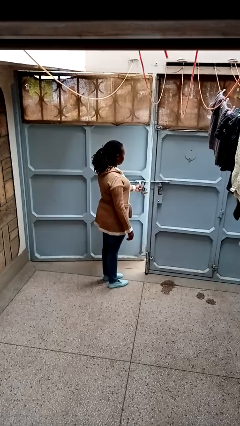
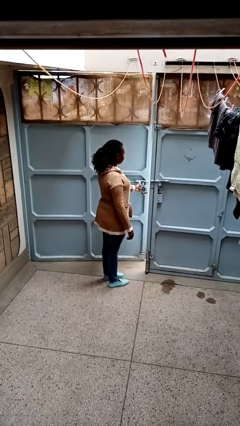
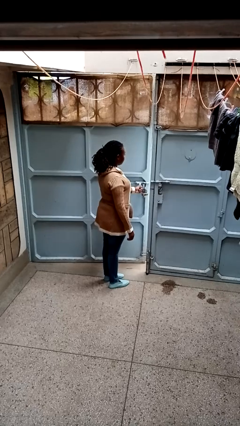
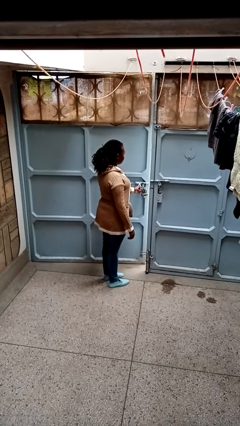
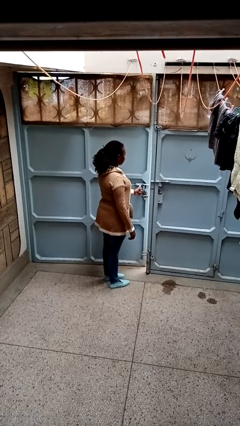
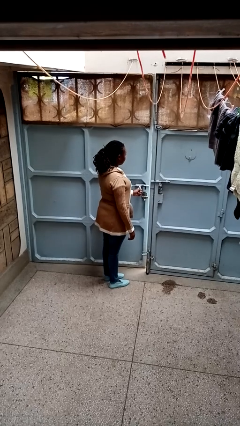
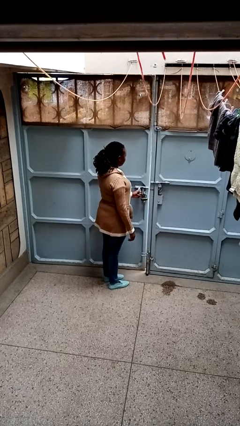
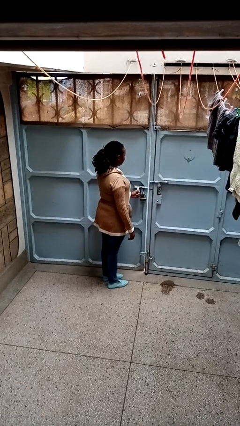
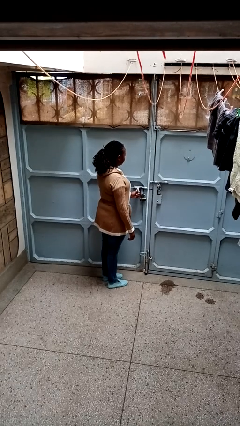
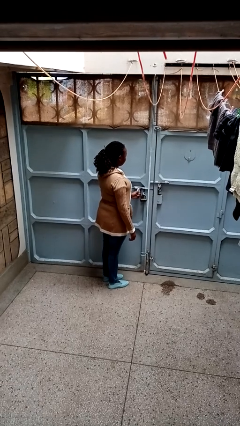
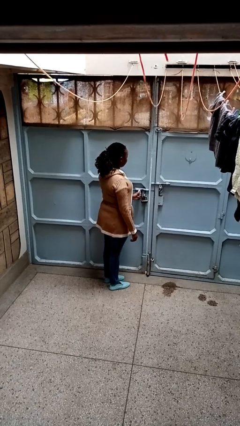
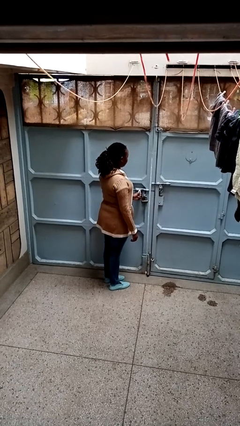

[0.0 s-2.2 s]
person closes gate

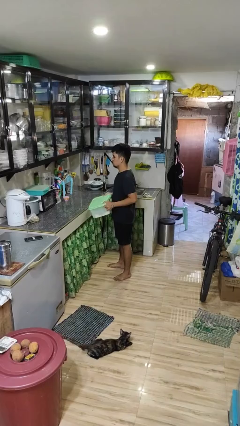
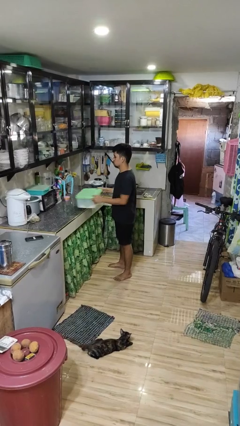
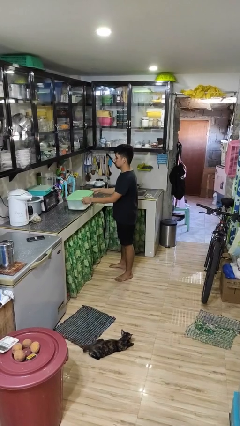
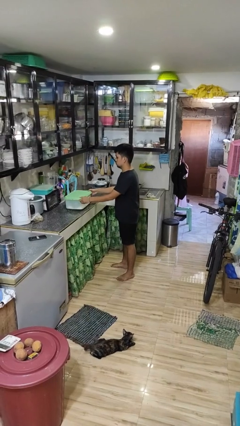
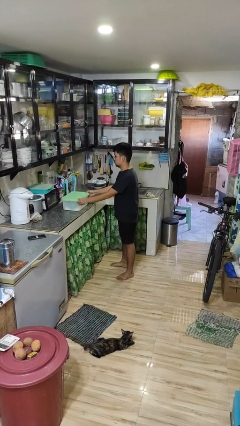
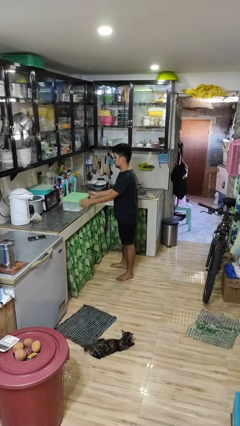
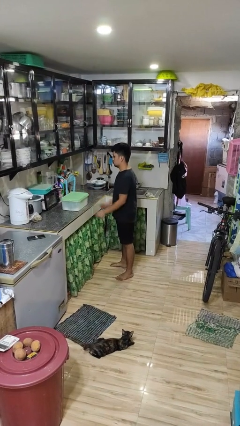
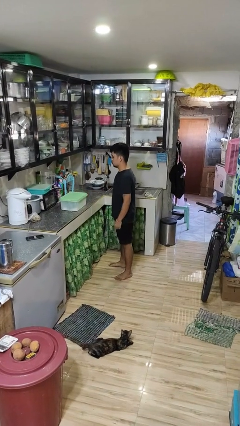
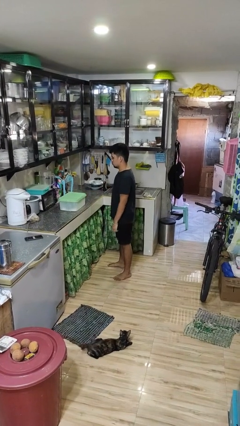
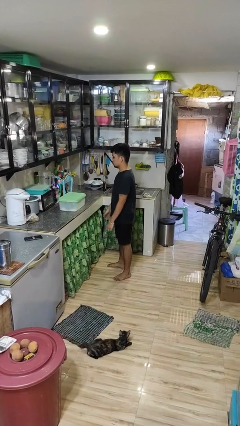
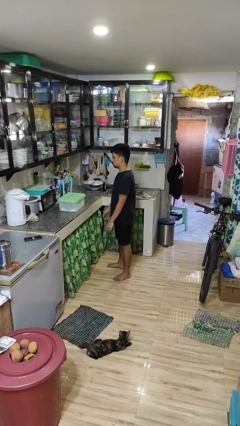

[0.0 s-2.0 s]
person puts down object on countertop

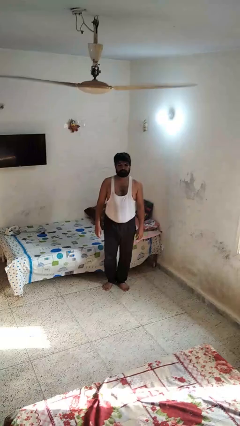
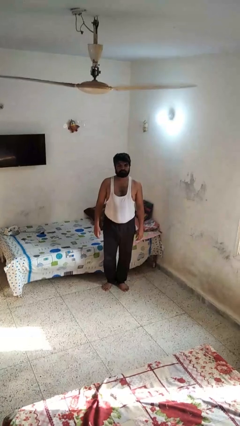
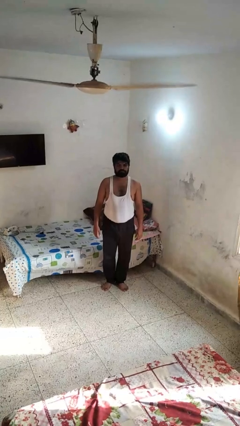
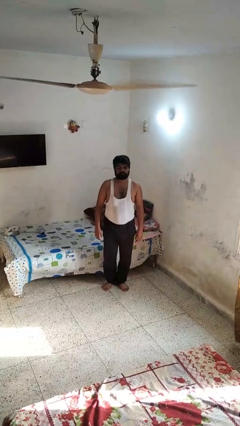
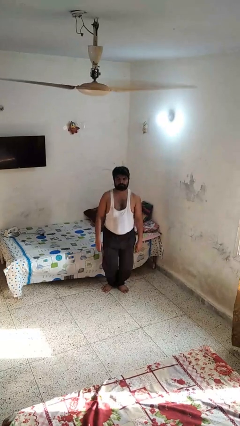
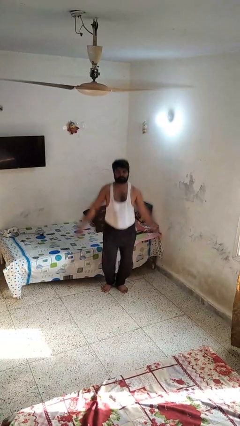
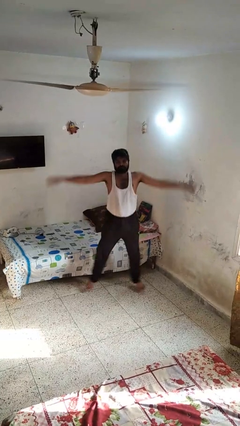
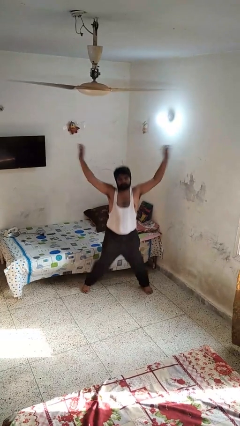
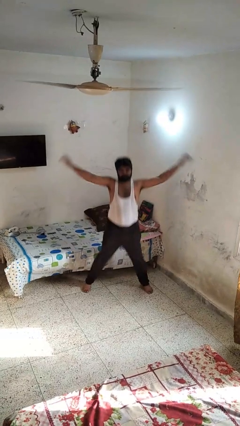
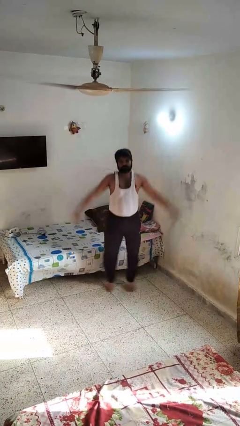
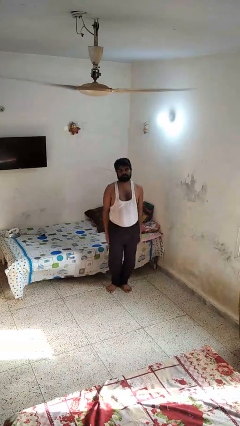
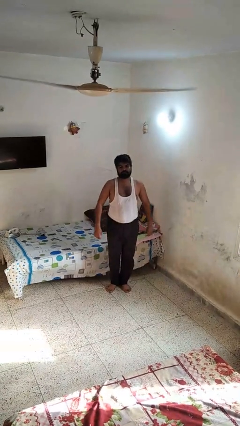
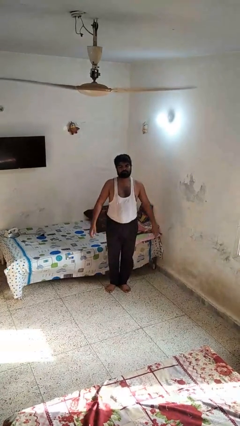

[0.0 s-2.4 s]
person exercises with jumping jacks

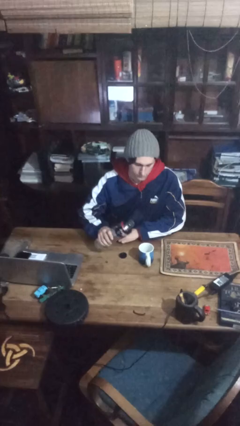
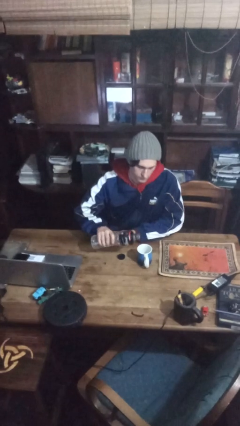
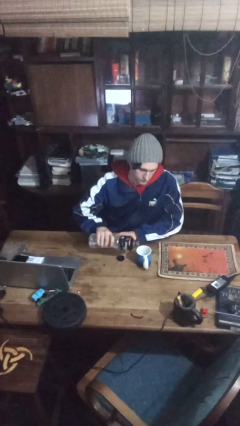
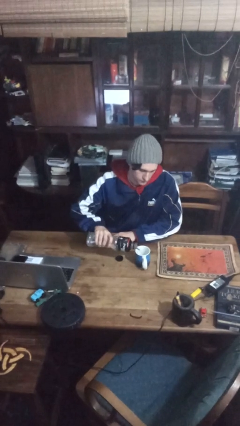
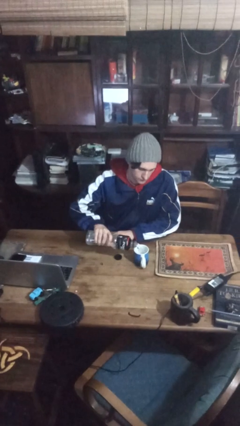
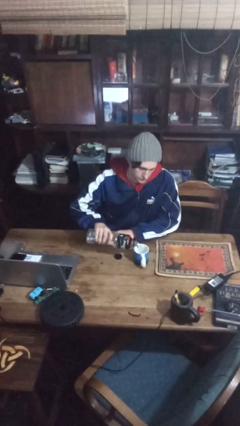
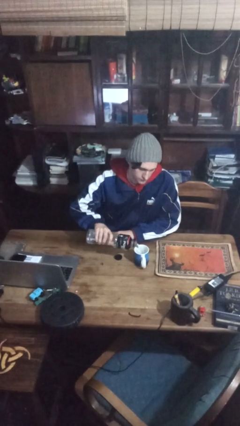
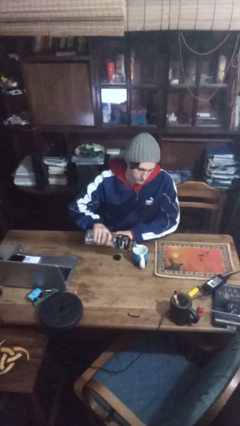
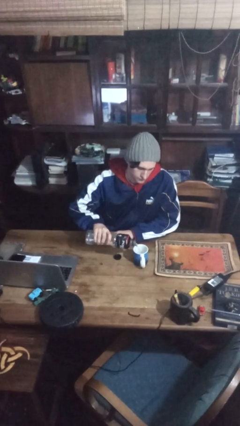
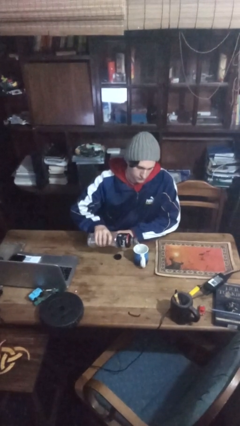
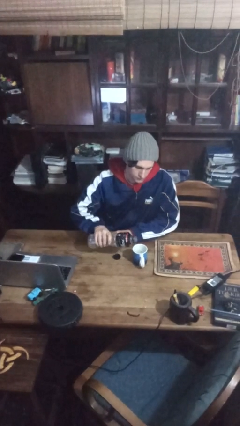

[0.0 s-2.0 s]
person pours liquid into cup

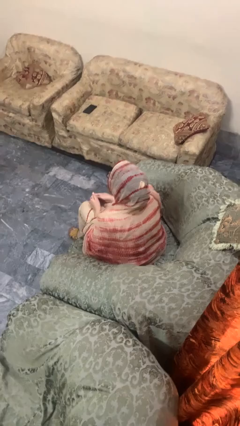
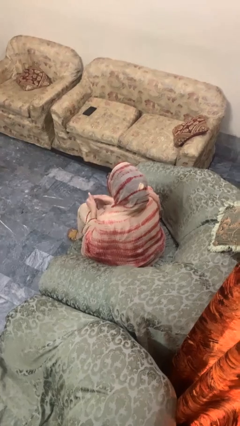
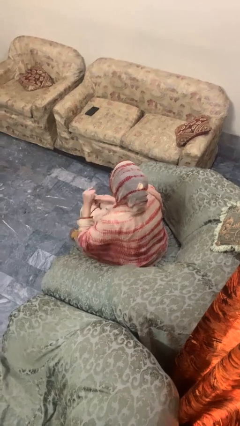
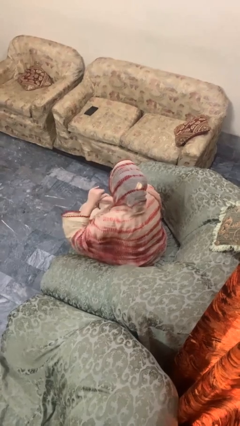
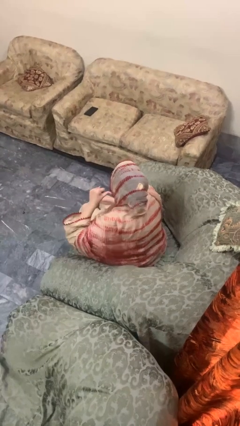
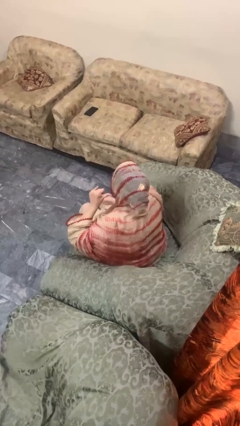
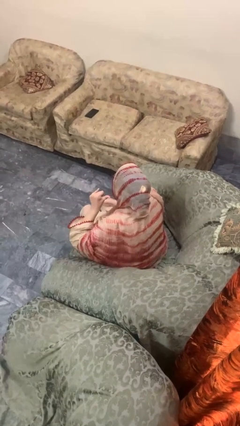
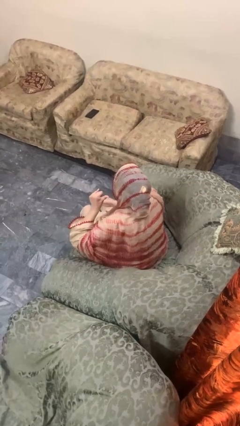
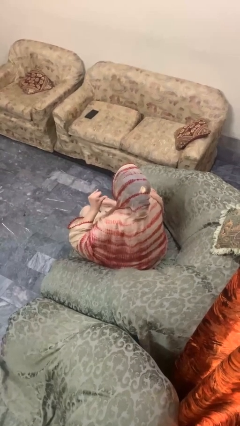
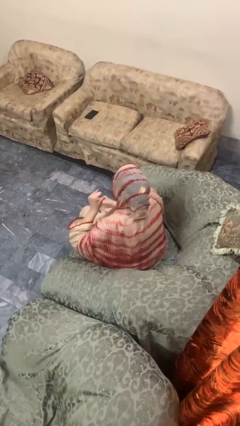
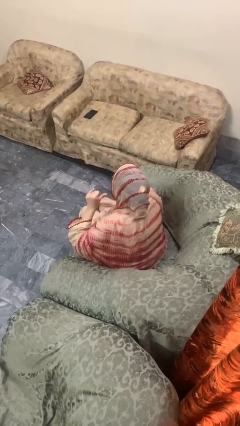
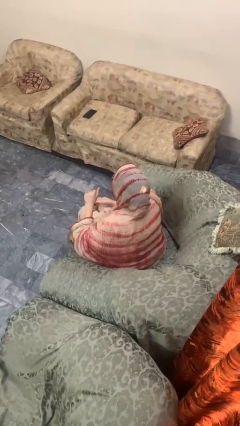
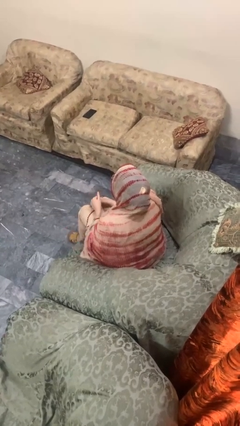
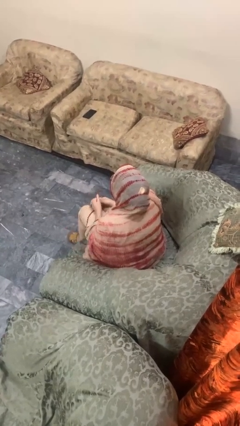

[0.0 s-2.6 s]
person gestures call me

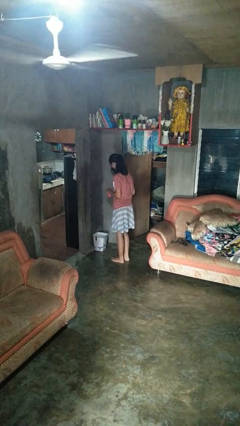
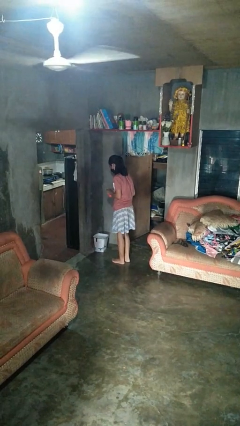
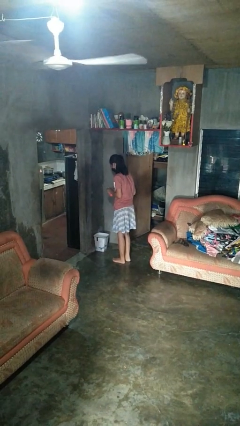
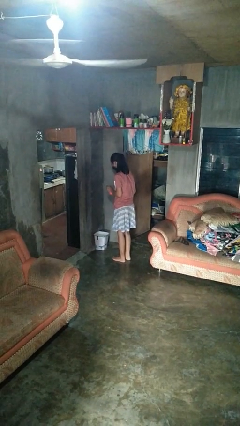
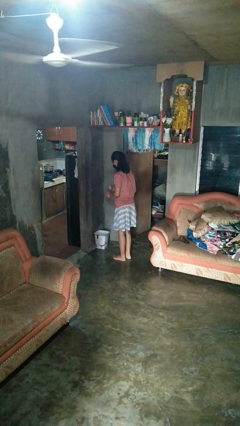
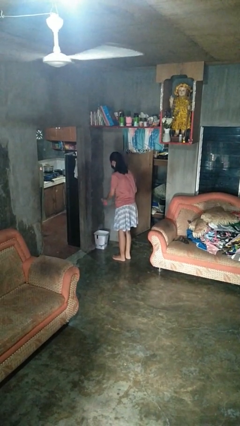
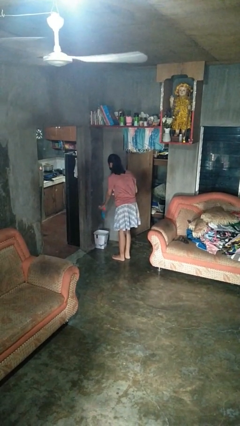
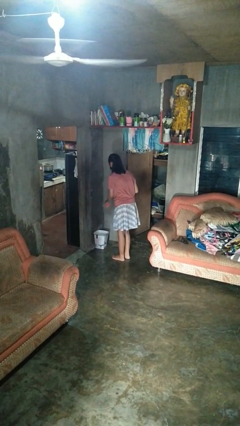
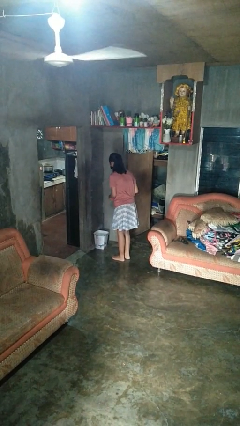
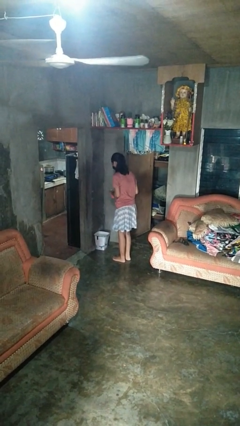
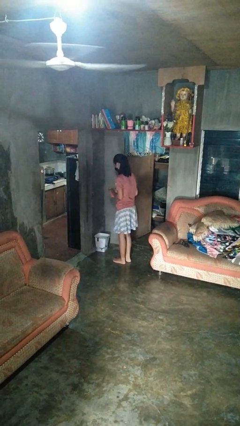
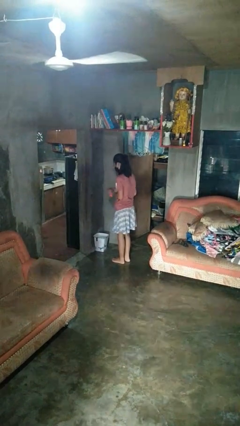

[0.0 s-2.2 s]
person discards trash

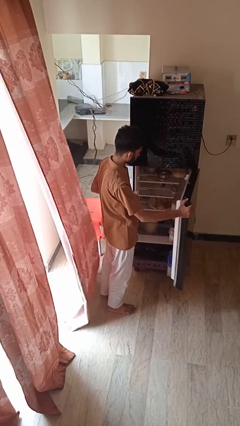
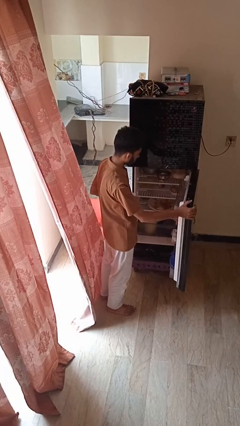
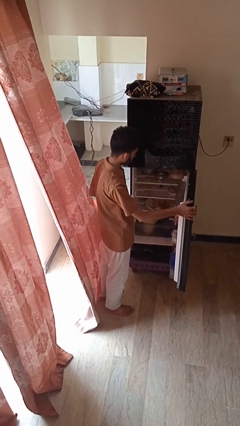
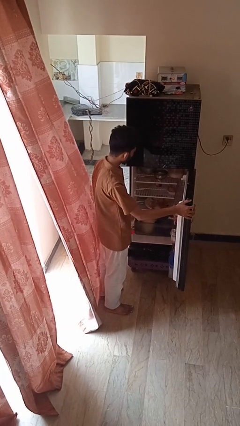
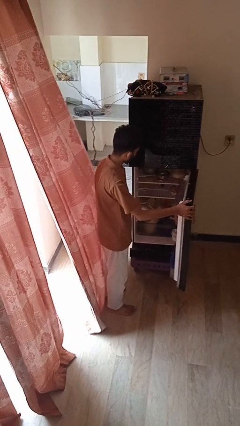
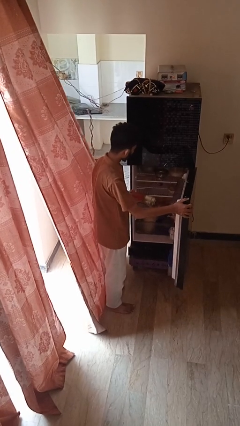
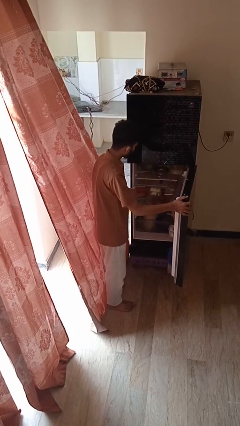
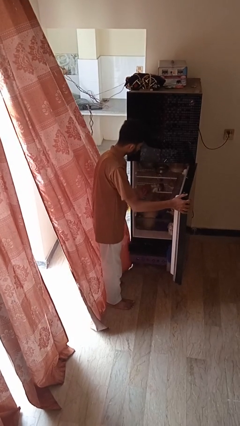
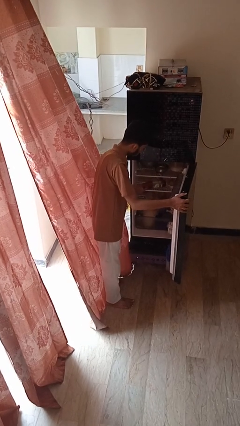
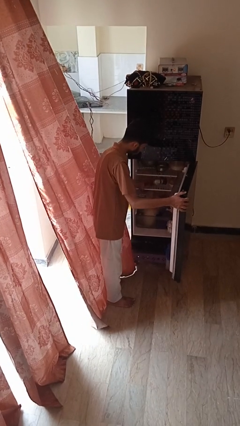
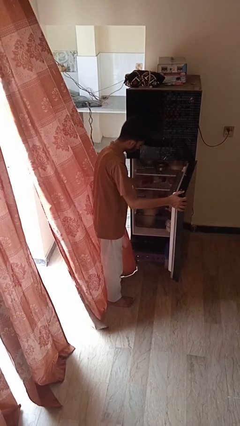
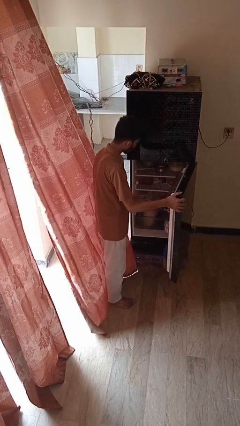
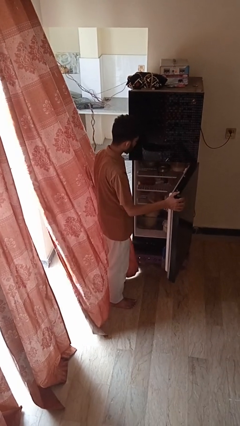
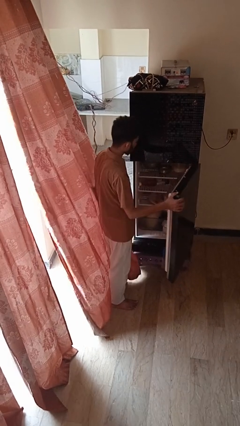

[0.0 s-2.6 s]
person puts object into refrigerator

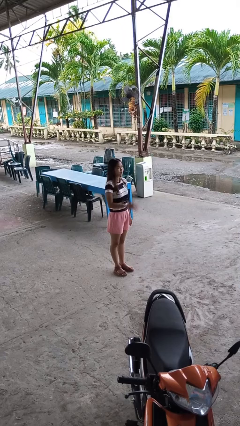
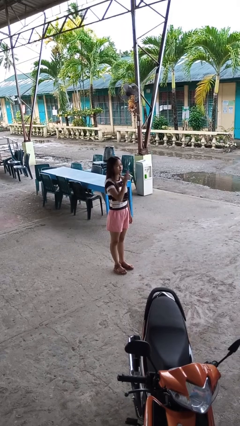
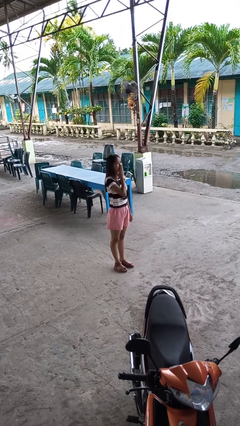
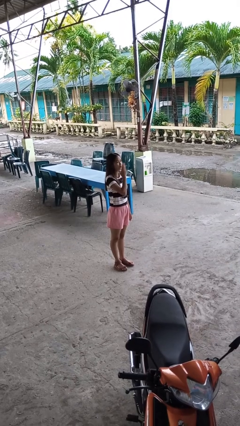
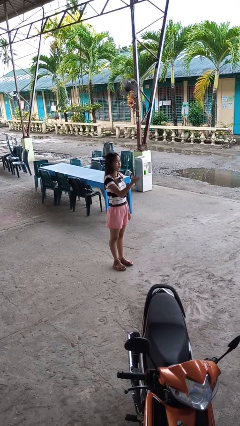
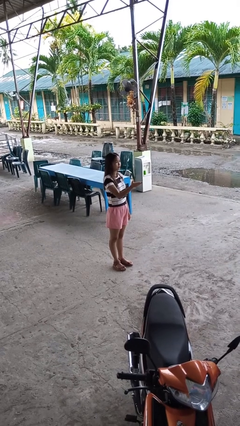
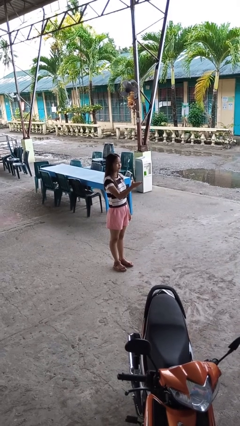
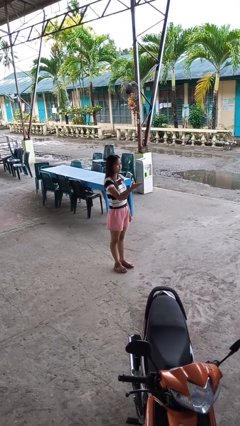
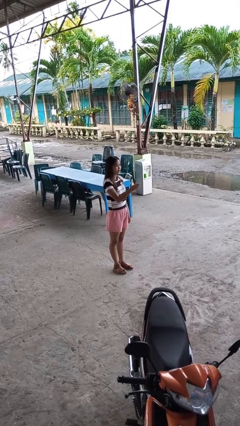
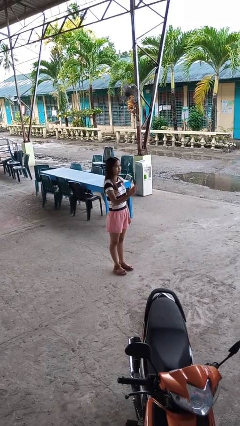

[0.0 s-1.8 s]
person gestures blow kiss
